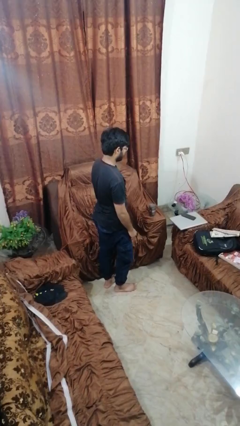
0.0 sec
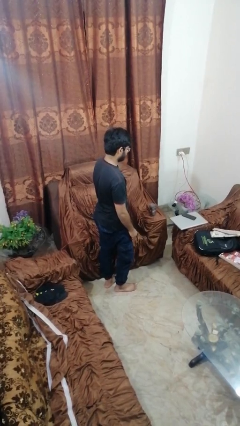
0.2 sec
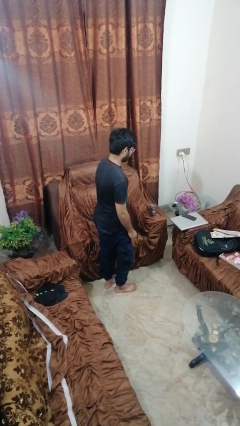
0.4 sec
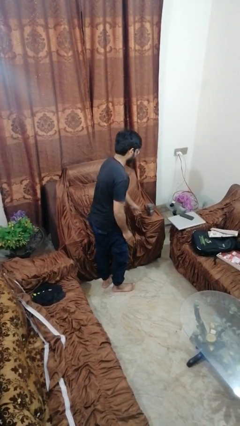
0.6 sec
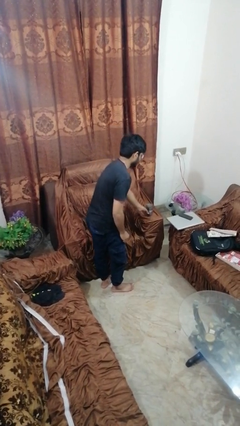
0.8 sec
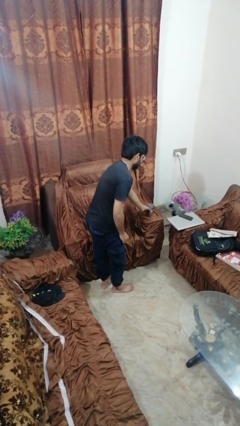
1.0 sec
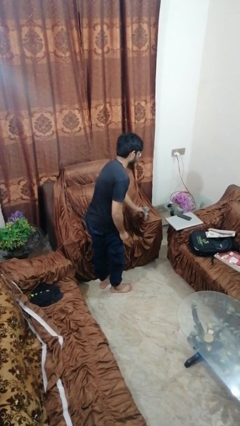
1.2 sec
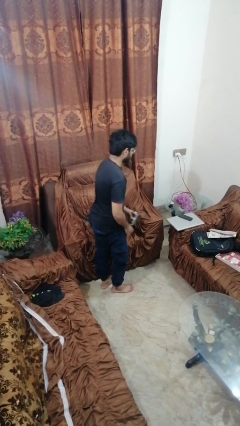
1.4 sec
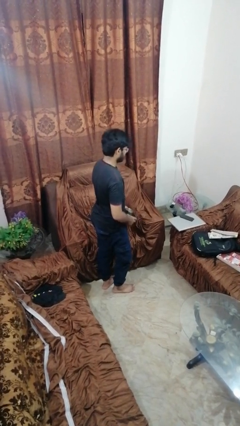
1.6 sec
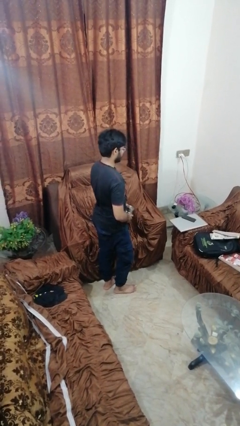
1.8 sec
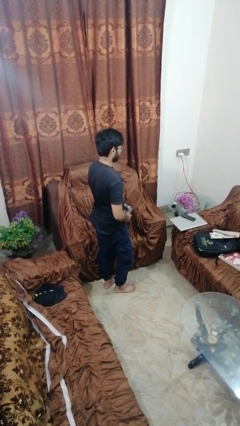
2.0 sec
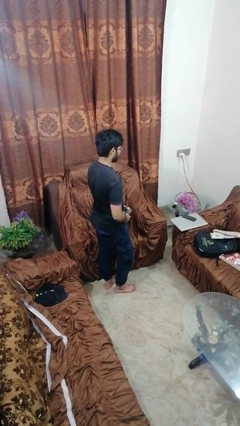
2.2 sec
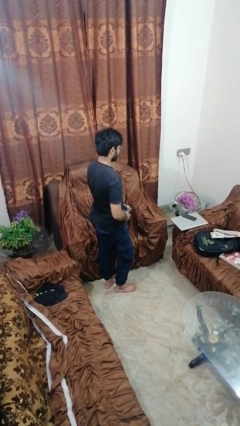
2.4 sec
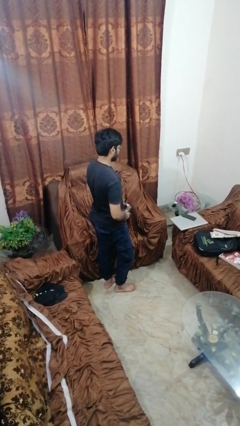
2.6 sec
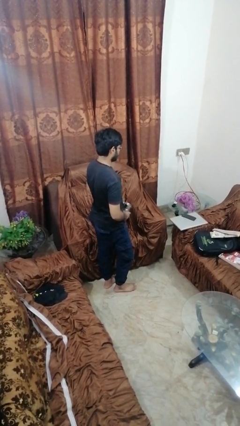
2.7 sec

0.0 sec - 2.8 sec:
person picks up object from couch

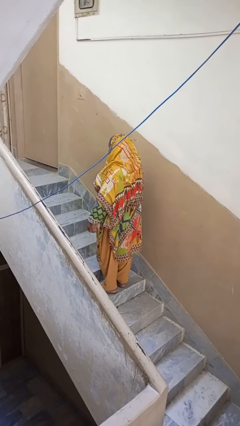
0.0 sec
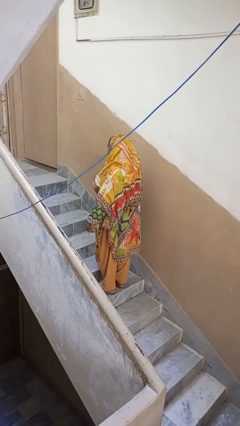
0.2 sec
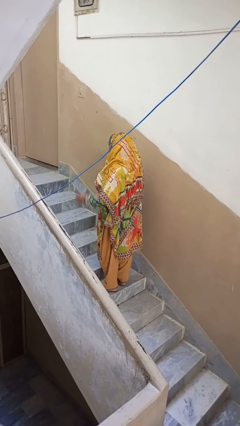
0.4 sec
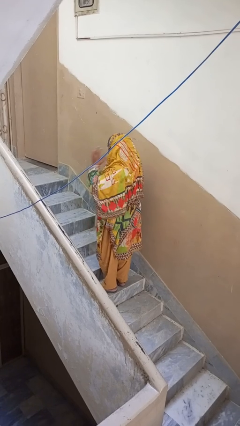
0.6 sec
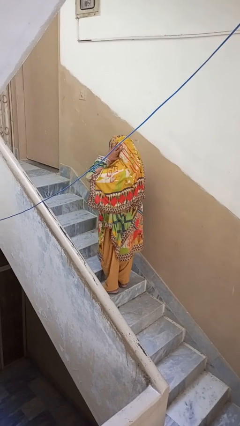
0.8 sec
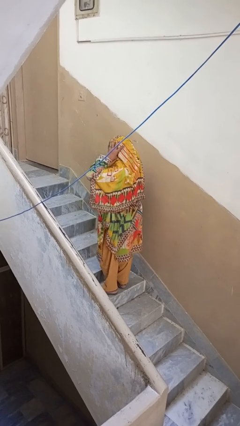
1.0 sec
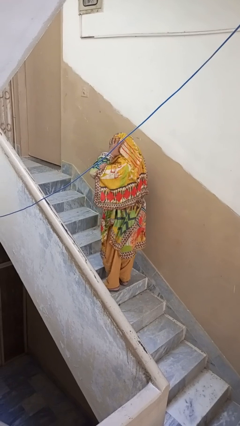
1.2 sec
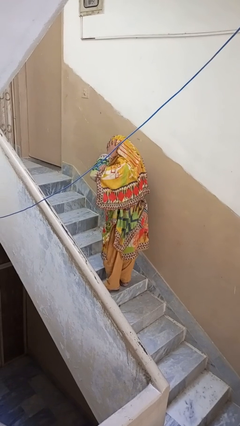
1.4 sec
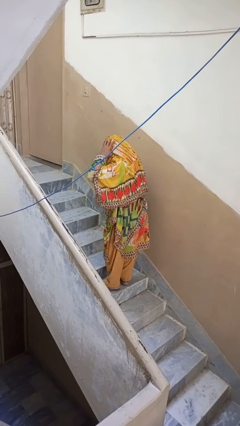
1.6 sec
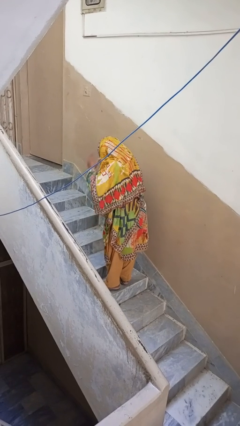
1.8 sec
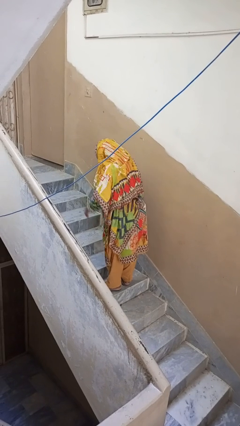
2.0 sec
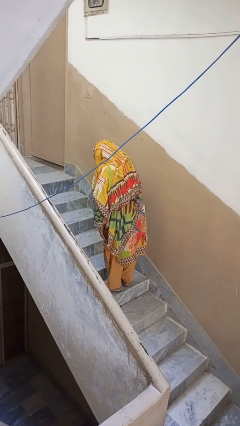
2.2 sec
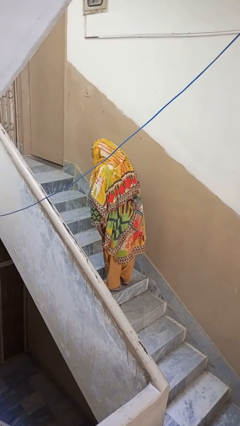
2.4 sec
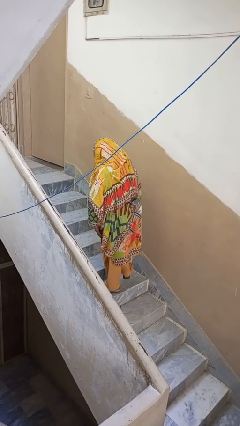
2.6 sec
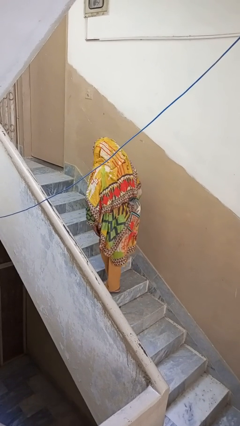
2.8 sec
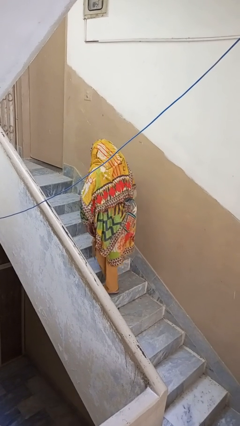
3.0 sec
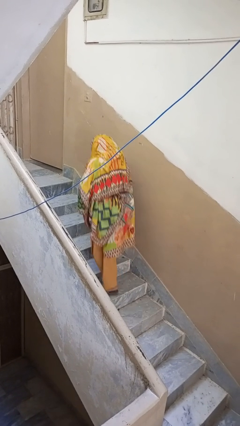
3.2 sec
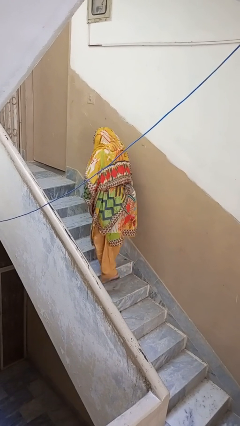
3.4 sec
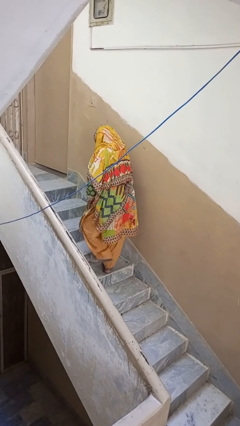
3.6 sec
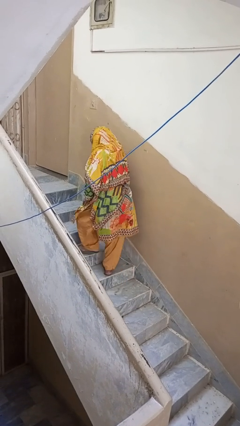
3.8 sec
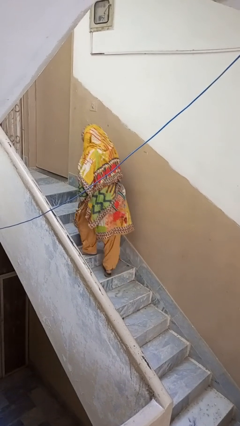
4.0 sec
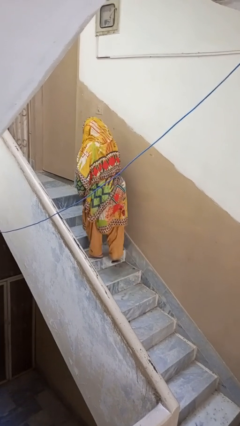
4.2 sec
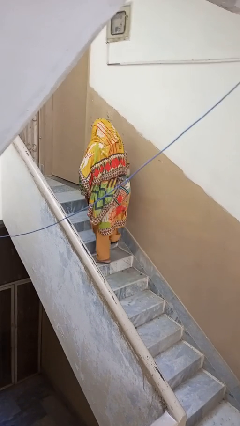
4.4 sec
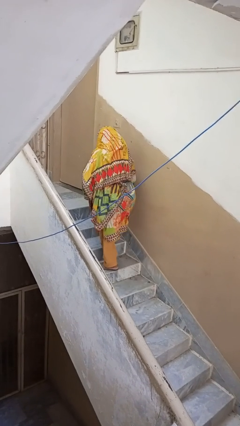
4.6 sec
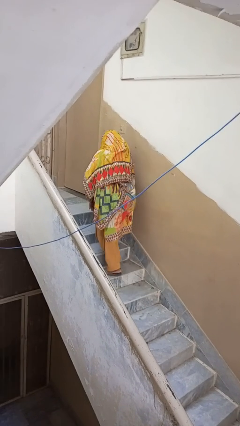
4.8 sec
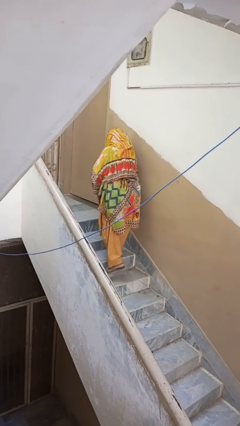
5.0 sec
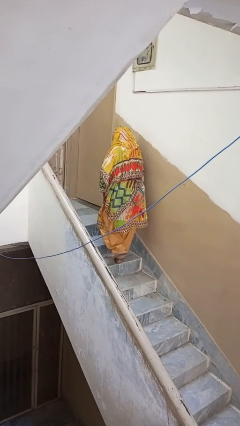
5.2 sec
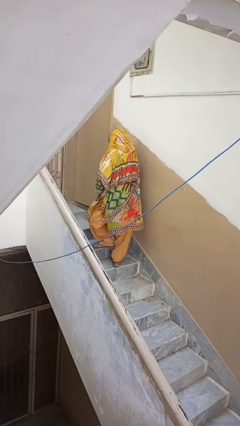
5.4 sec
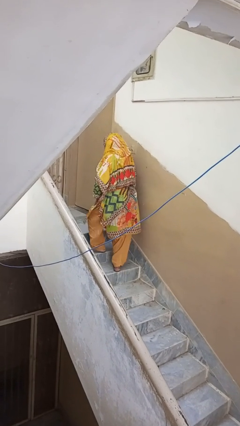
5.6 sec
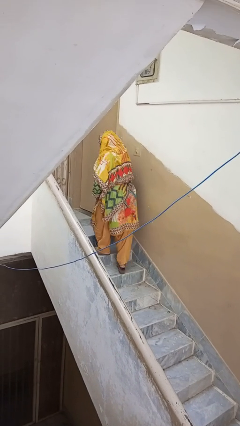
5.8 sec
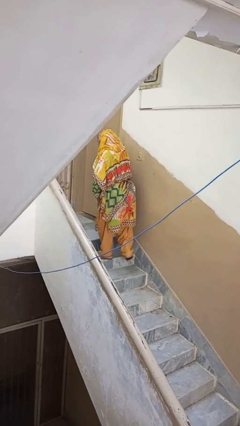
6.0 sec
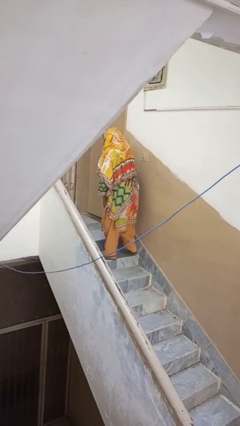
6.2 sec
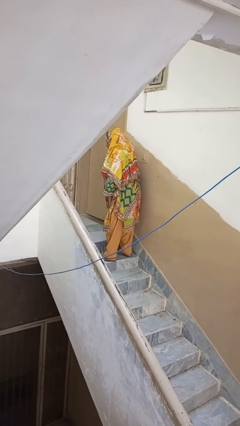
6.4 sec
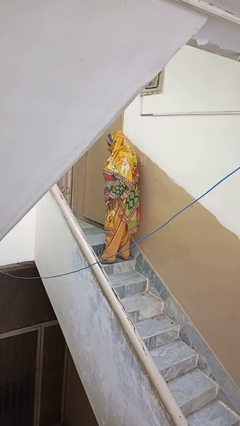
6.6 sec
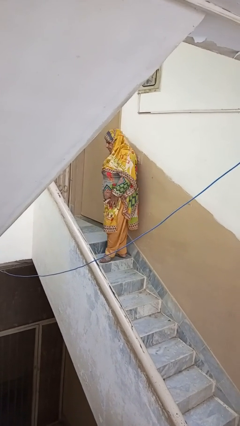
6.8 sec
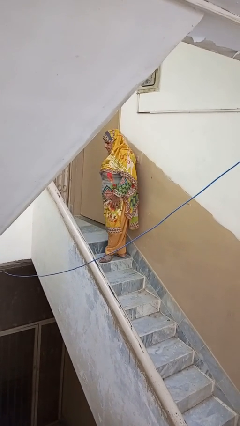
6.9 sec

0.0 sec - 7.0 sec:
person climbs up stairs

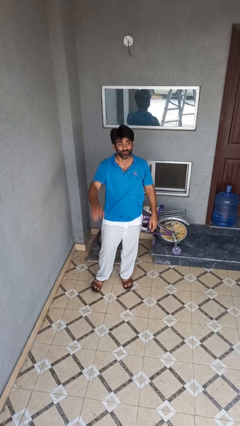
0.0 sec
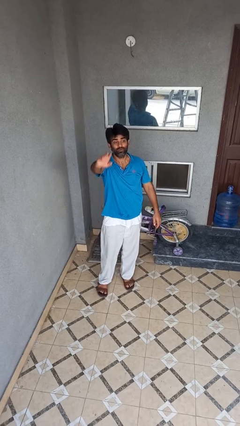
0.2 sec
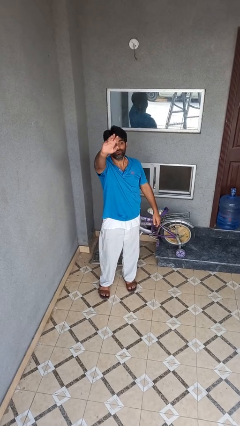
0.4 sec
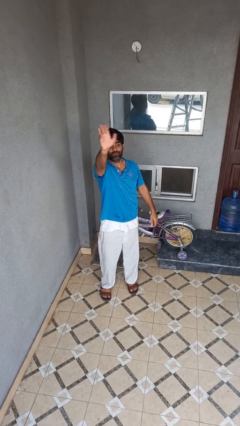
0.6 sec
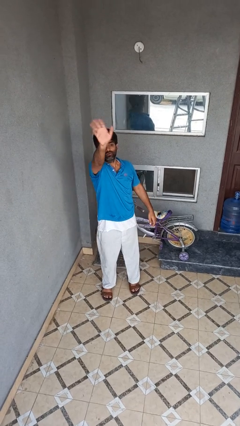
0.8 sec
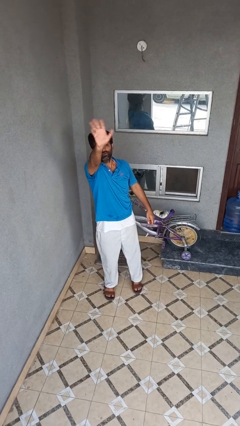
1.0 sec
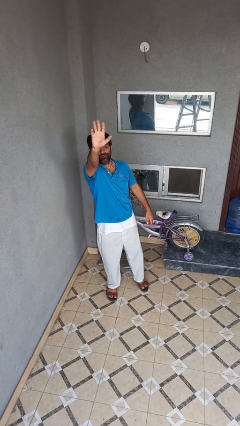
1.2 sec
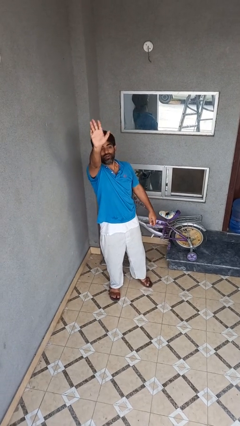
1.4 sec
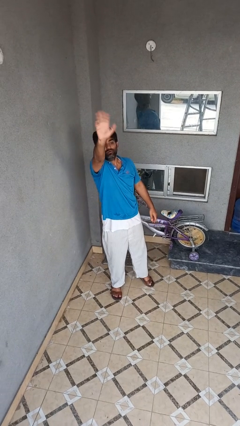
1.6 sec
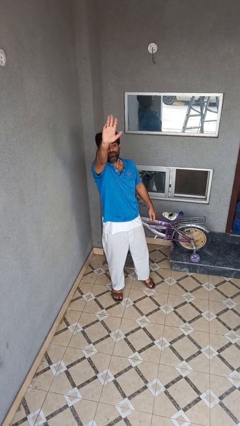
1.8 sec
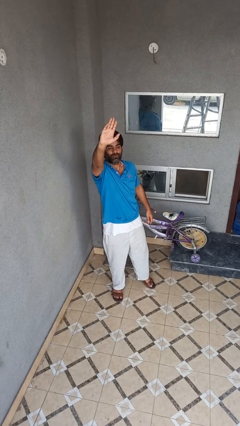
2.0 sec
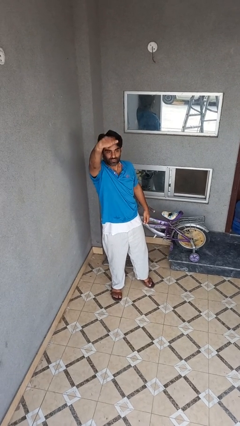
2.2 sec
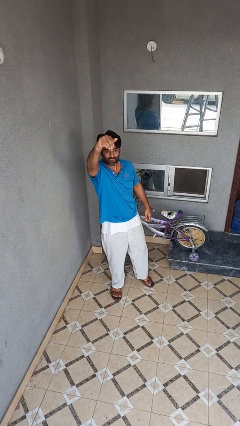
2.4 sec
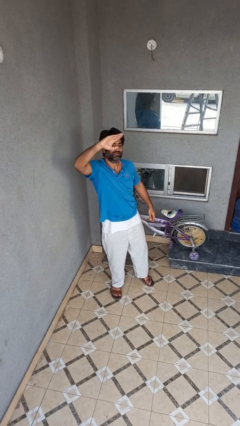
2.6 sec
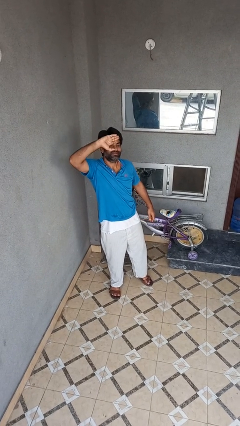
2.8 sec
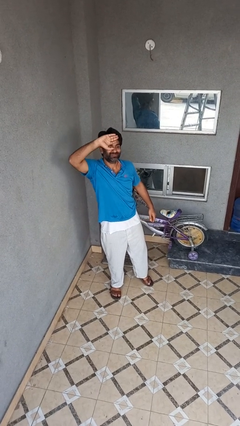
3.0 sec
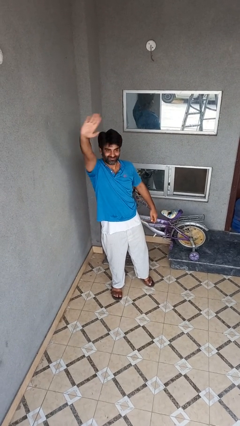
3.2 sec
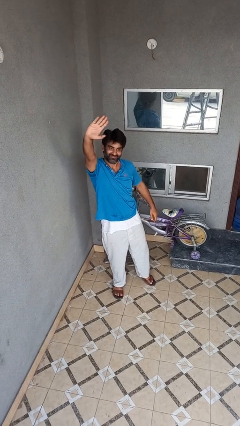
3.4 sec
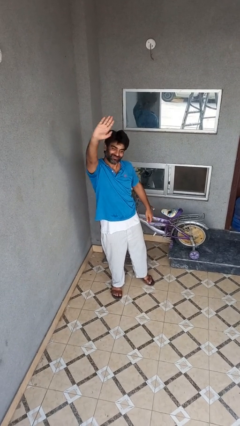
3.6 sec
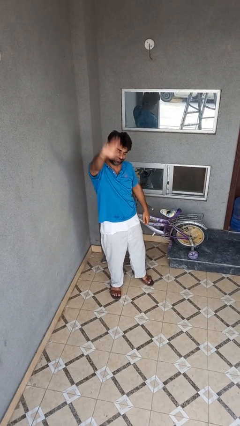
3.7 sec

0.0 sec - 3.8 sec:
person waves at person

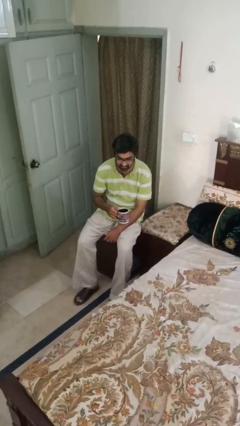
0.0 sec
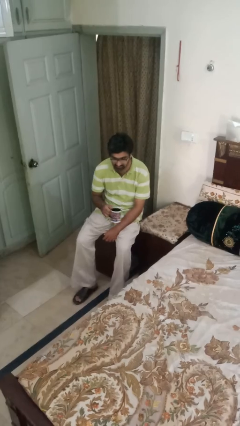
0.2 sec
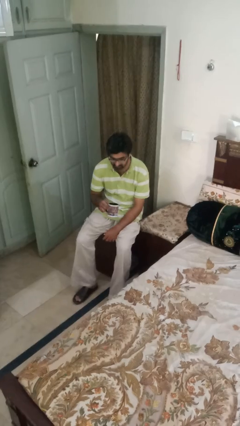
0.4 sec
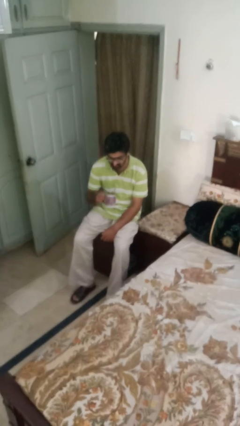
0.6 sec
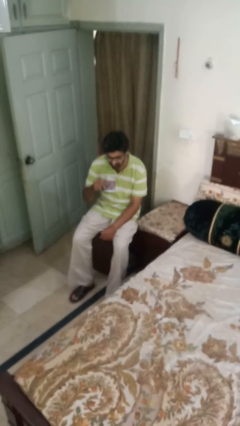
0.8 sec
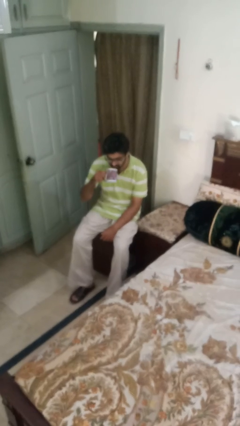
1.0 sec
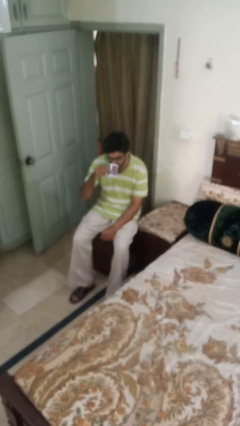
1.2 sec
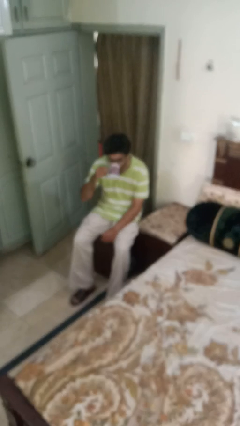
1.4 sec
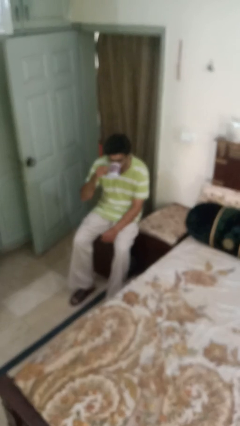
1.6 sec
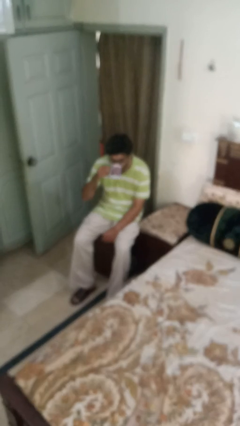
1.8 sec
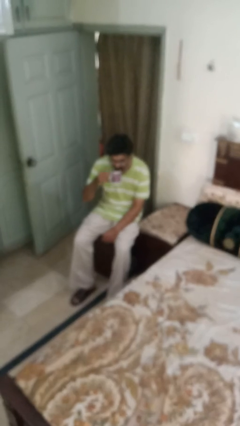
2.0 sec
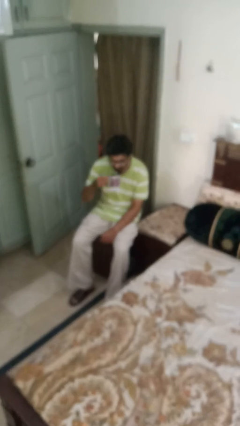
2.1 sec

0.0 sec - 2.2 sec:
person drinks from mug

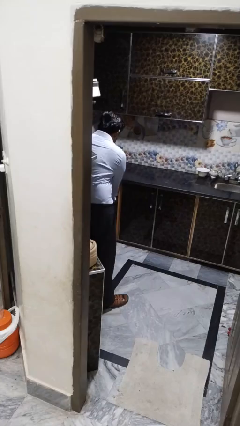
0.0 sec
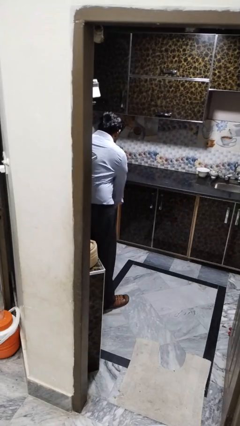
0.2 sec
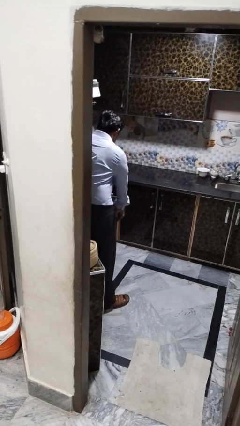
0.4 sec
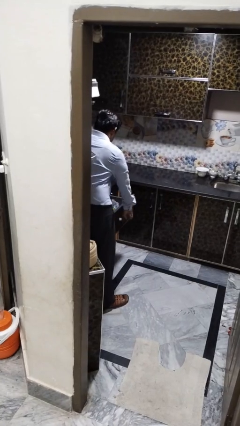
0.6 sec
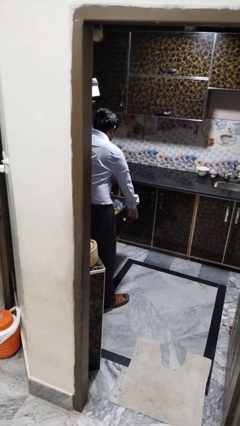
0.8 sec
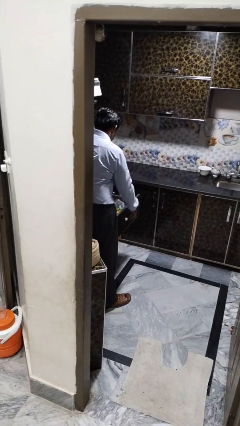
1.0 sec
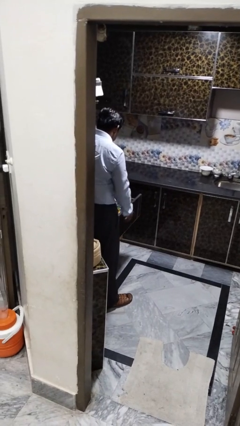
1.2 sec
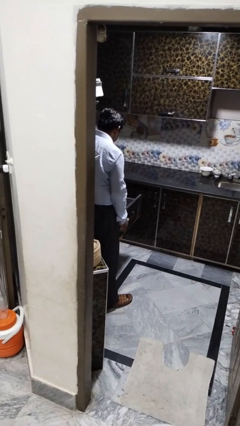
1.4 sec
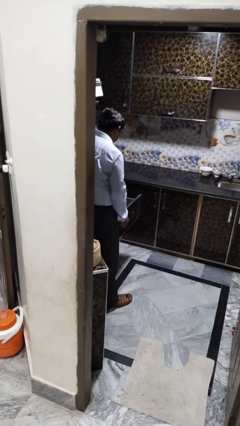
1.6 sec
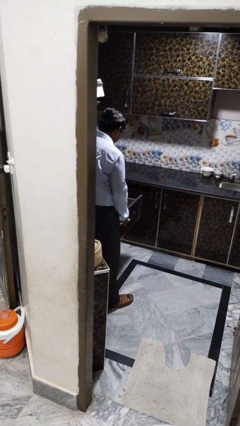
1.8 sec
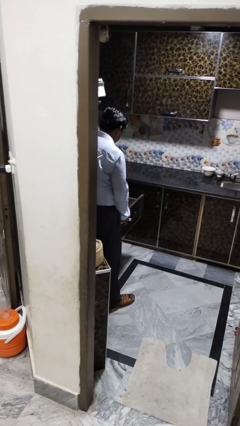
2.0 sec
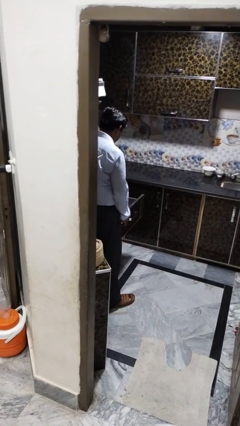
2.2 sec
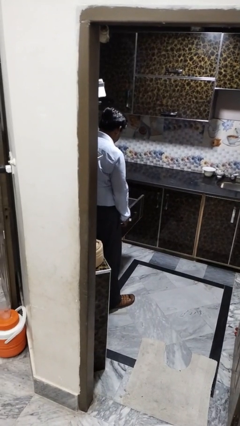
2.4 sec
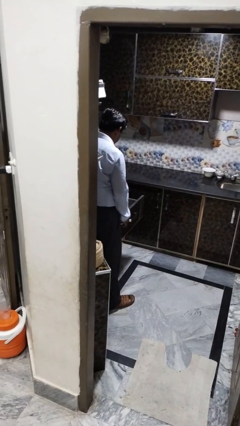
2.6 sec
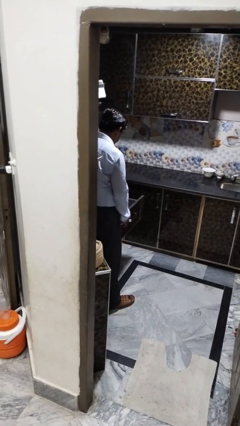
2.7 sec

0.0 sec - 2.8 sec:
person opens kitchen drawer
